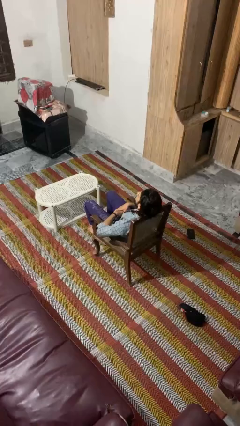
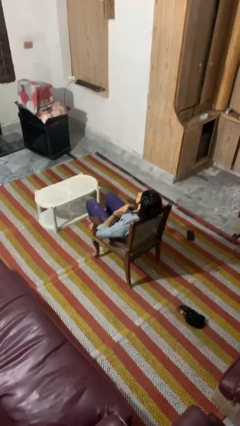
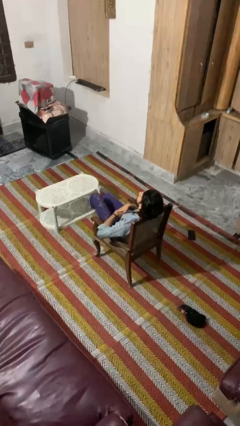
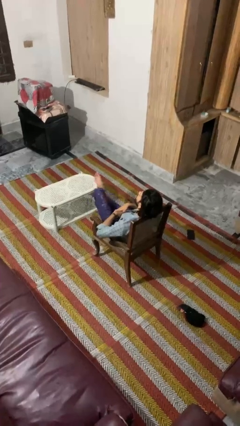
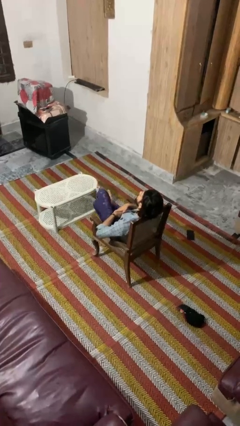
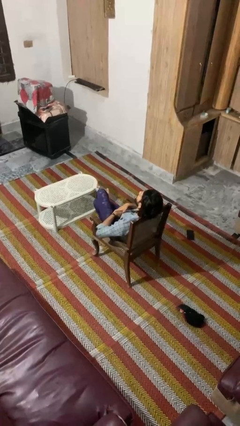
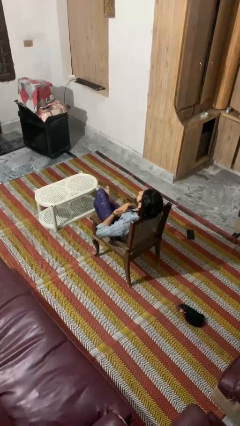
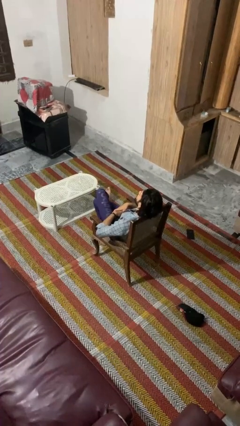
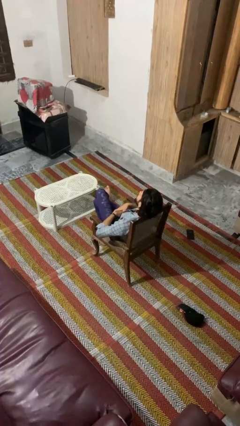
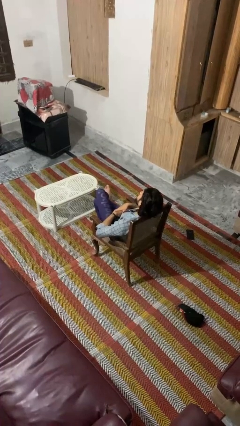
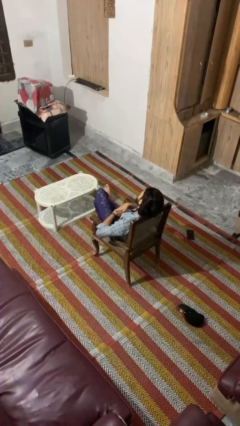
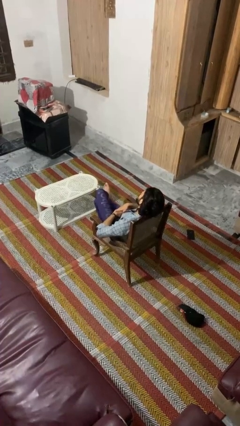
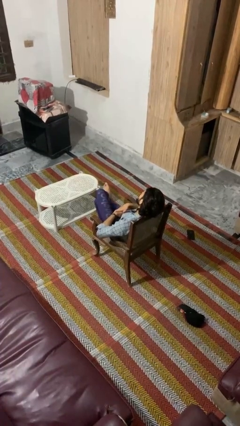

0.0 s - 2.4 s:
person crosses legs

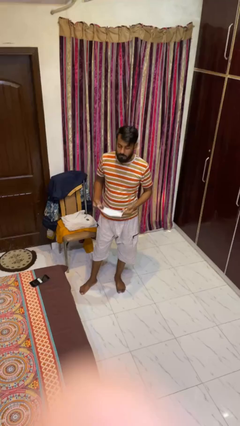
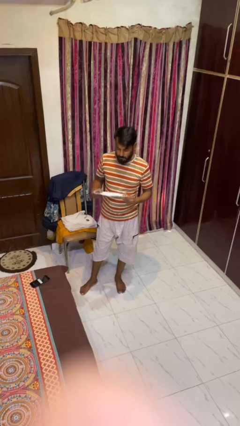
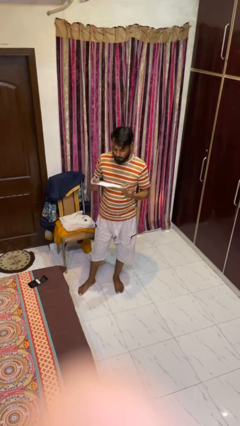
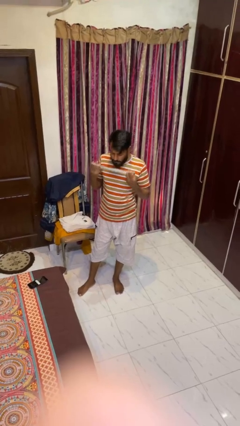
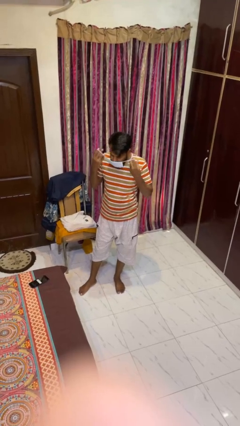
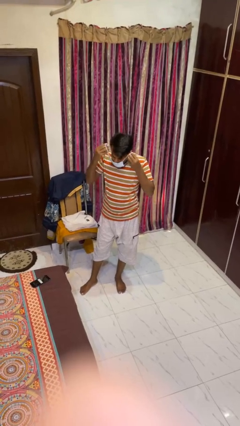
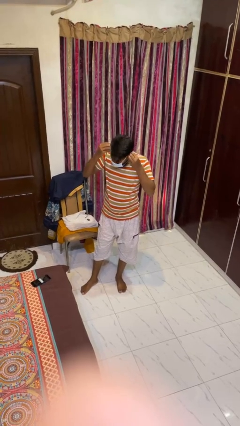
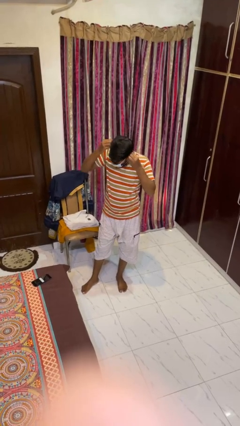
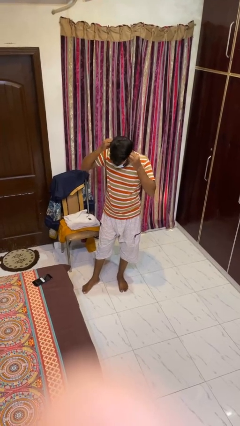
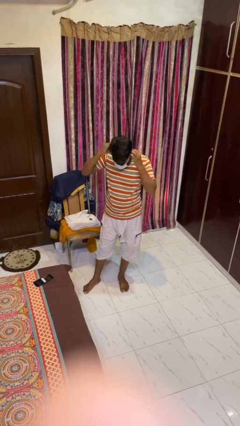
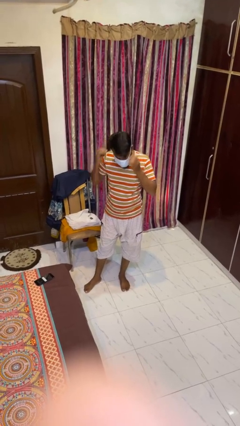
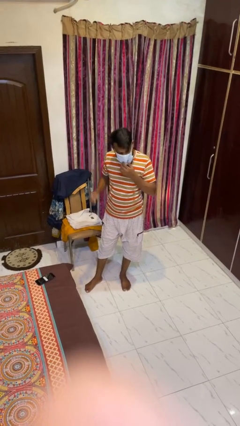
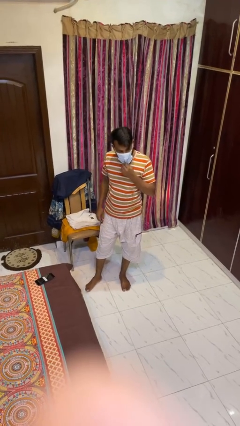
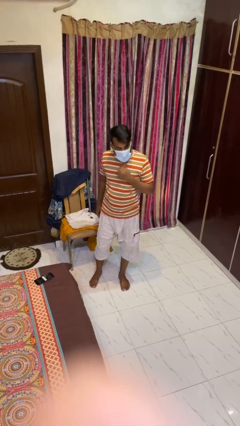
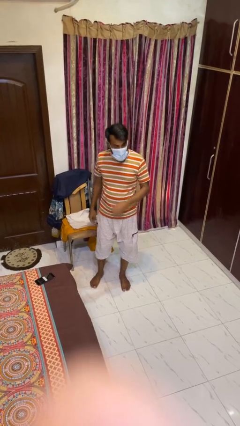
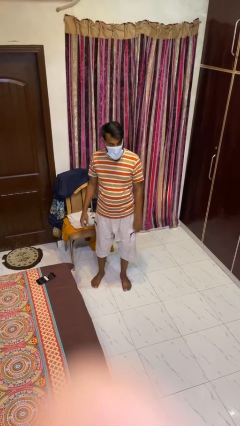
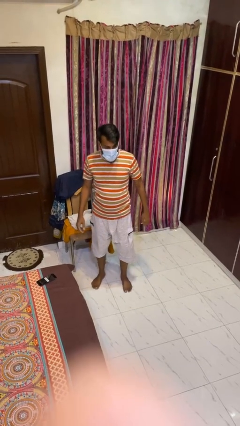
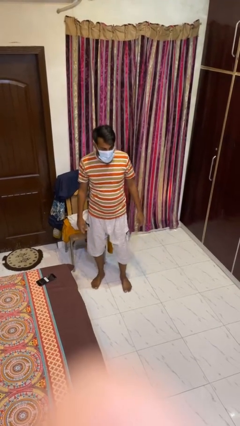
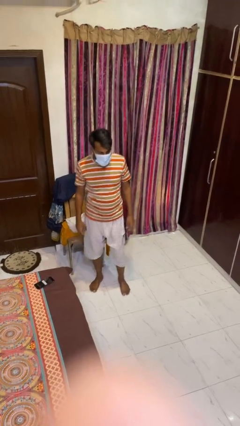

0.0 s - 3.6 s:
person puts on facemask

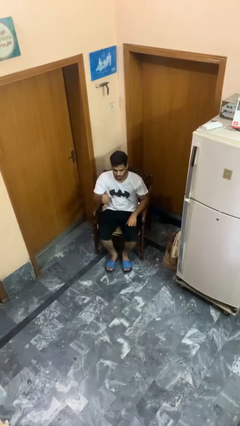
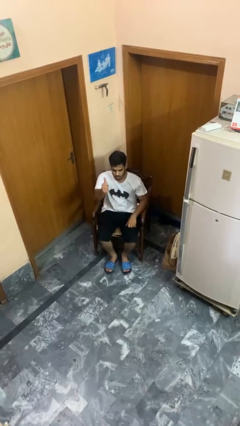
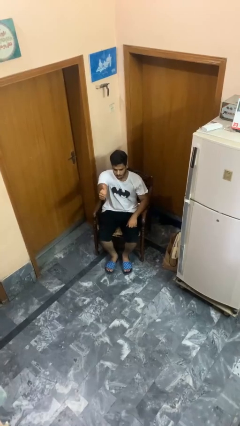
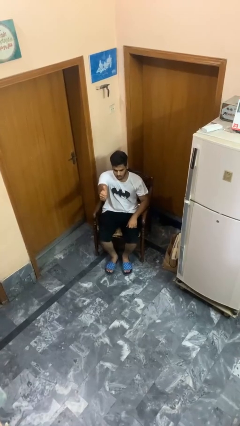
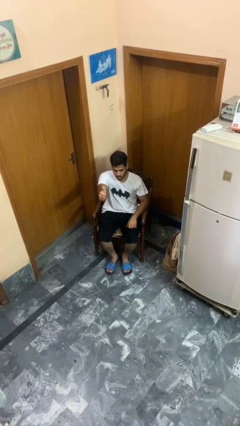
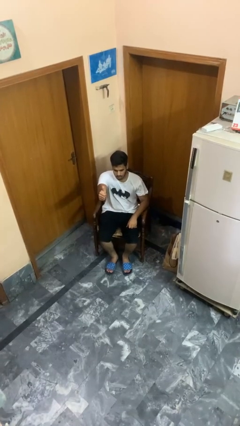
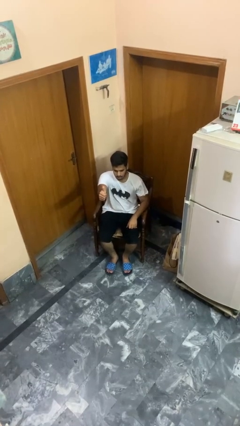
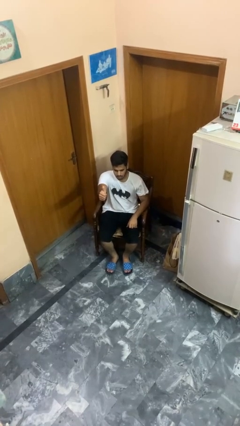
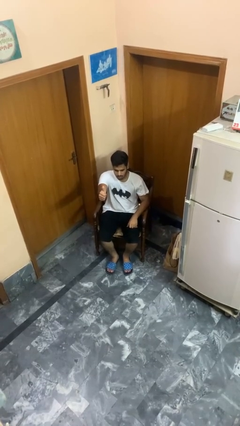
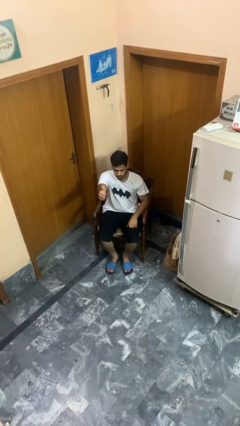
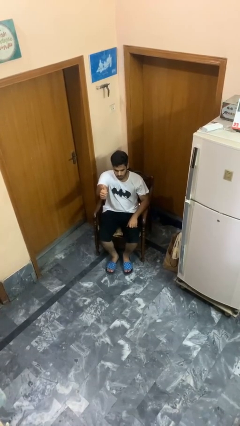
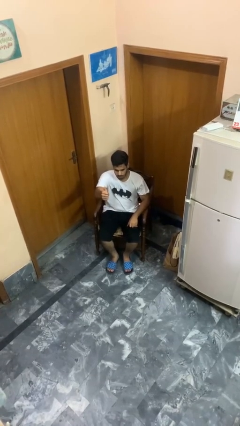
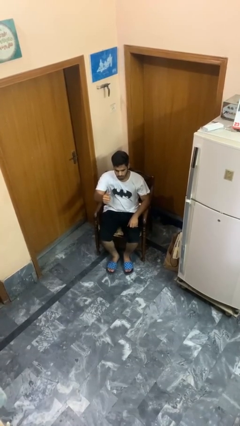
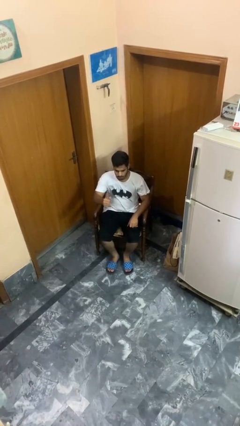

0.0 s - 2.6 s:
person gestures thumbs up

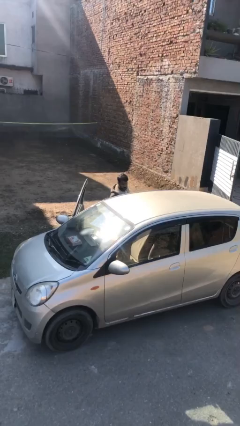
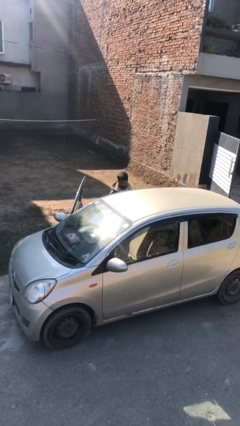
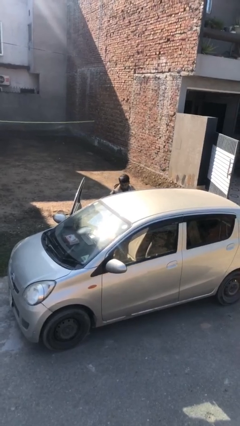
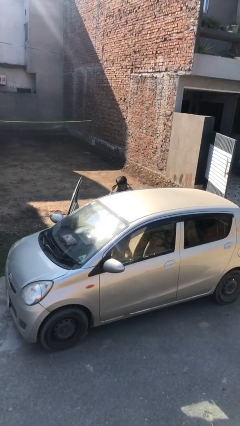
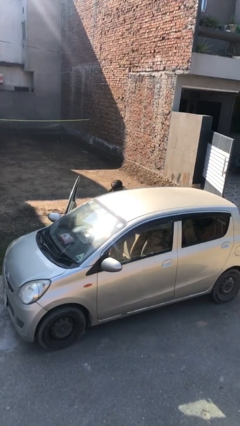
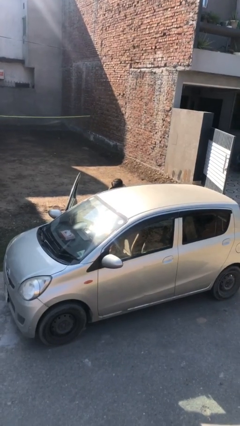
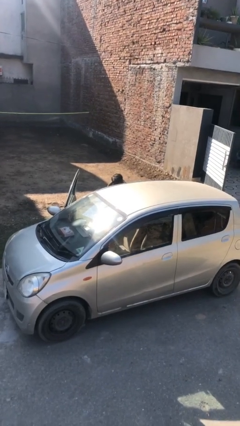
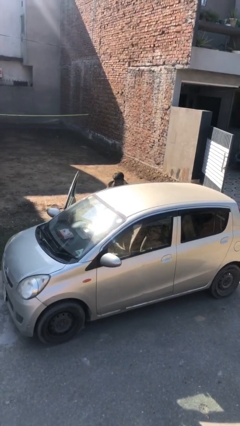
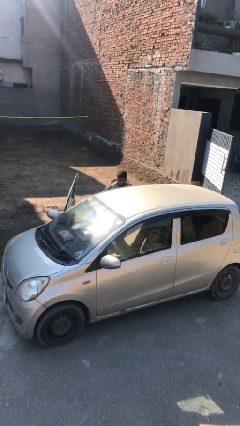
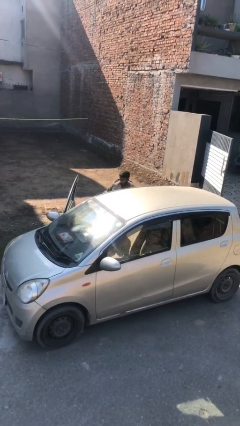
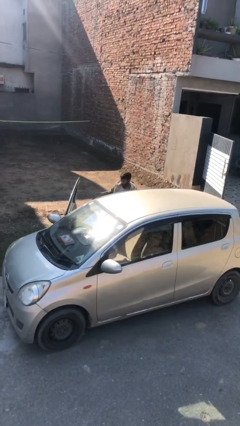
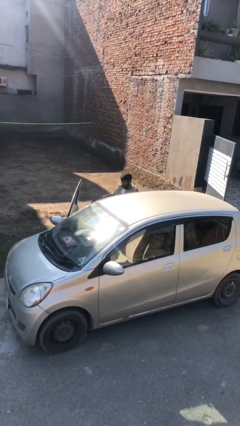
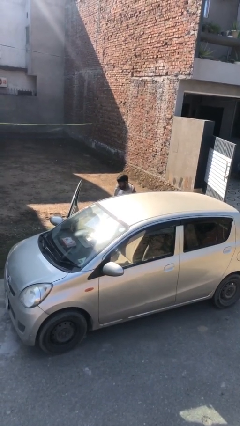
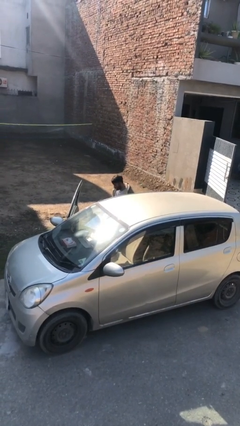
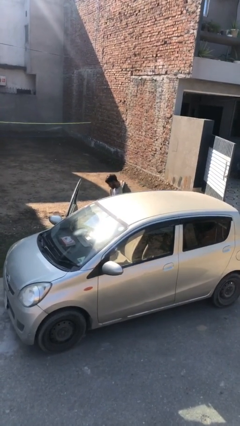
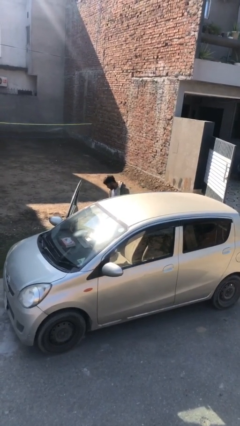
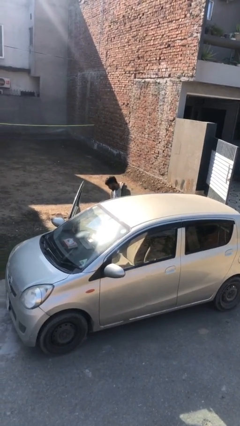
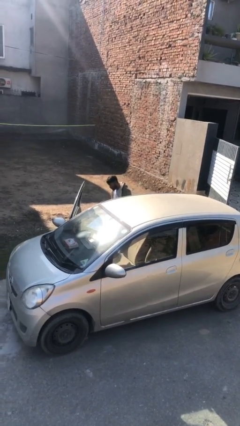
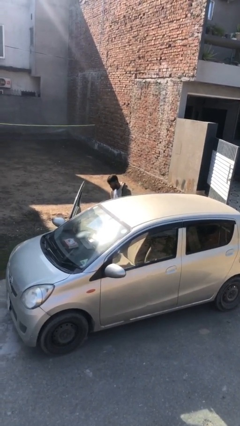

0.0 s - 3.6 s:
person unloads car

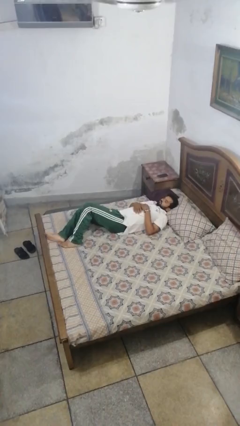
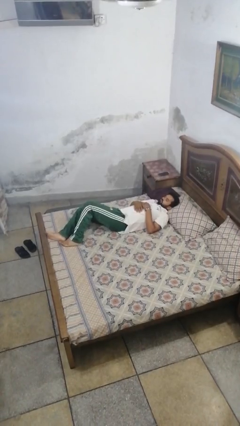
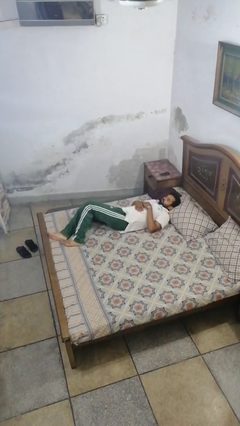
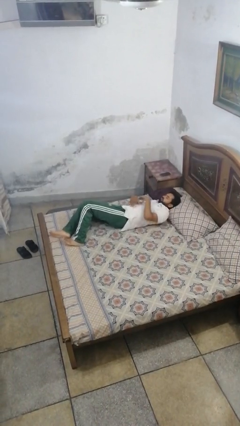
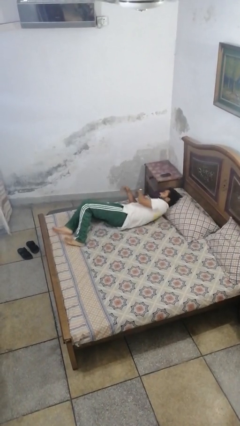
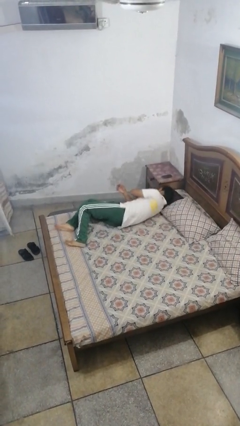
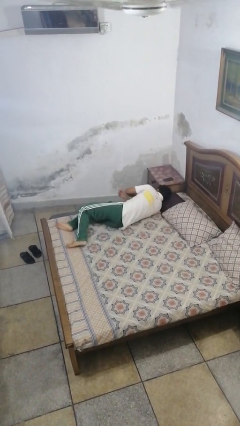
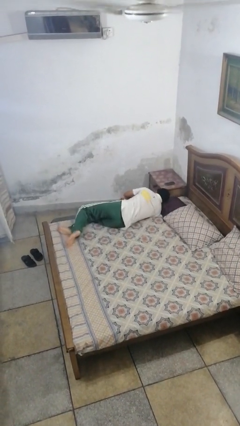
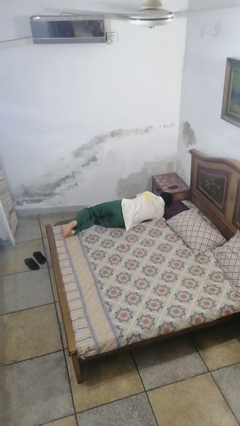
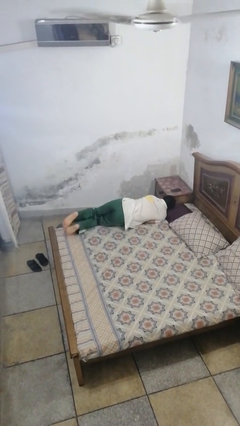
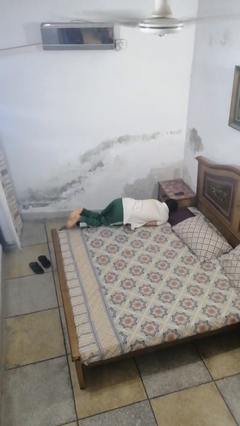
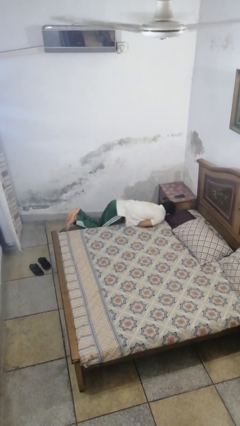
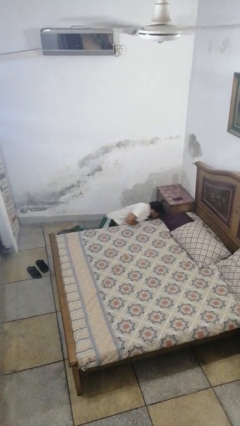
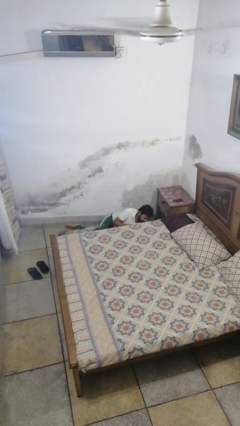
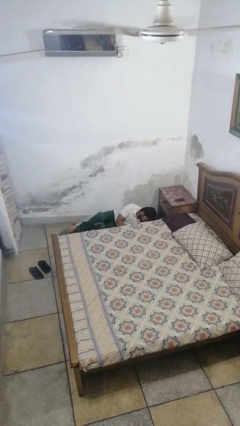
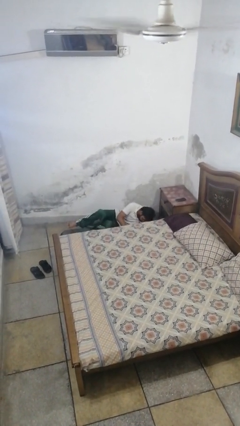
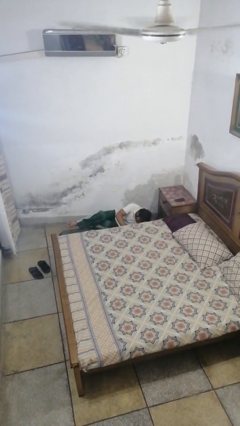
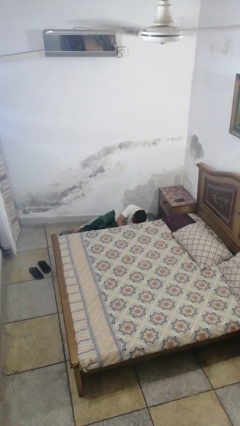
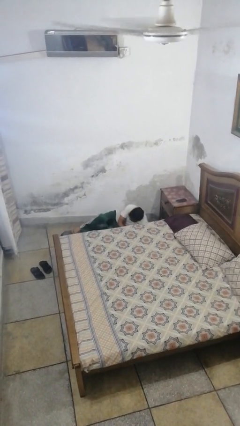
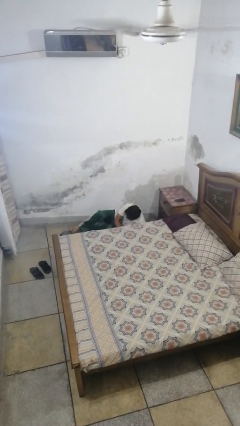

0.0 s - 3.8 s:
person falls from bed

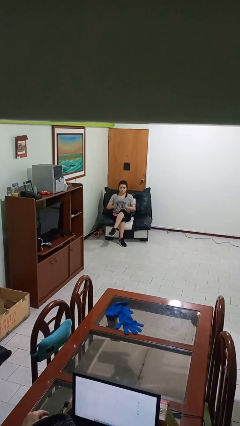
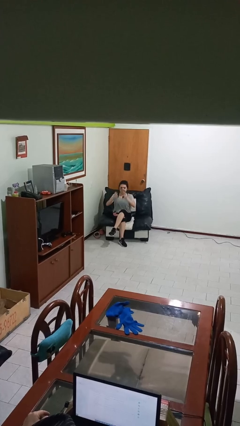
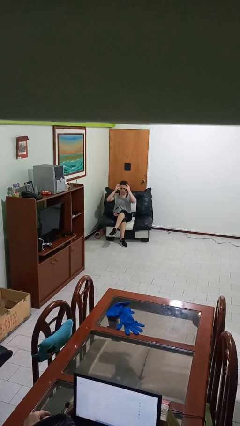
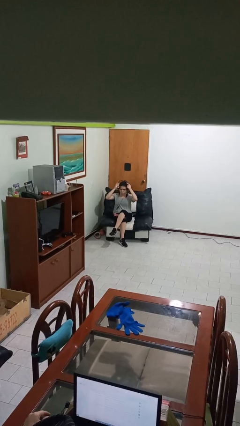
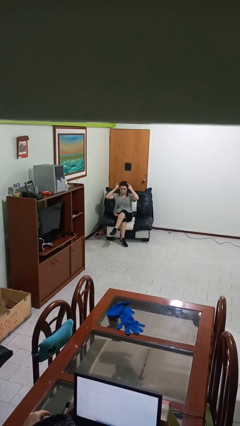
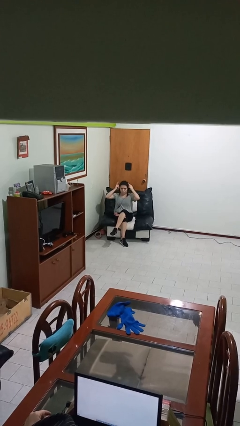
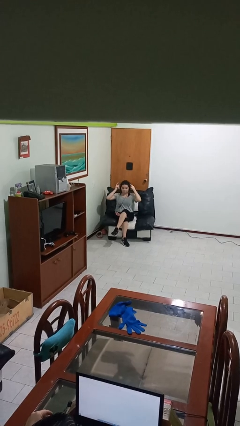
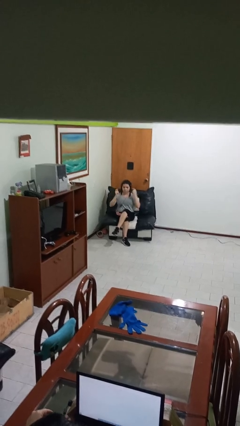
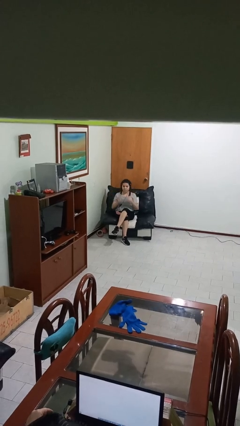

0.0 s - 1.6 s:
person puts on headphones
